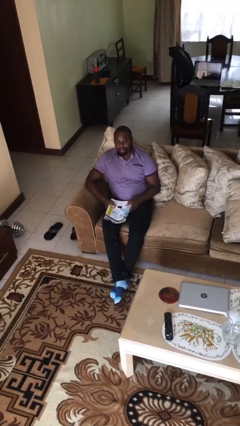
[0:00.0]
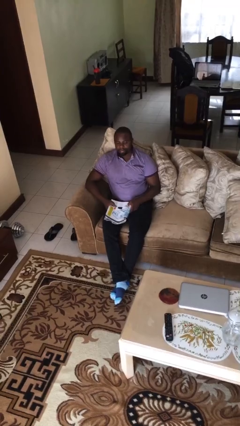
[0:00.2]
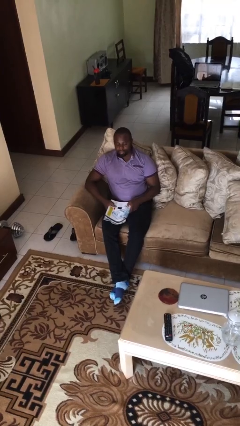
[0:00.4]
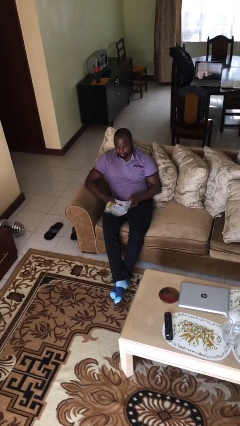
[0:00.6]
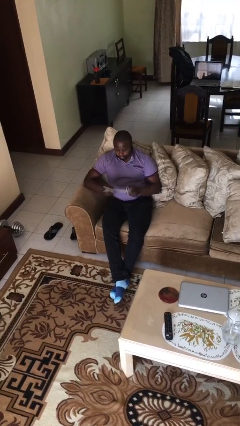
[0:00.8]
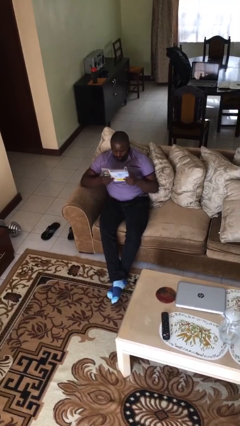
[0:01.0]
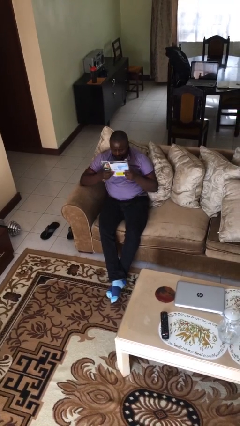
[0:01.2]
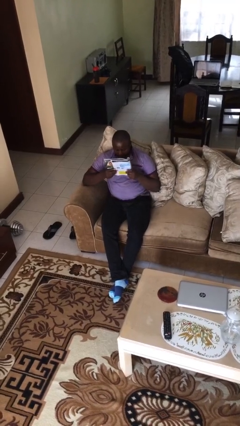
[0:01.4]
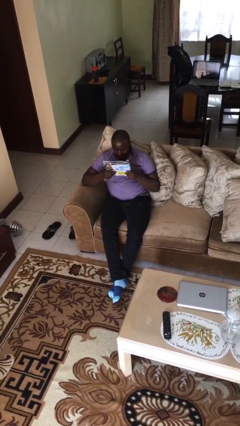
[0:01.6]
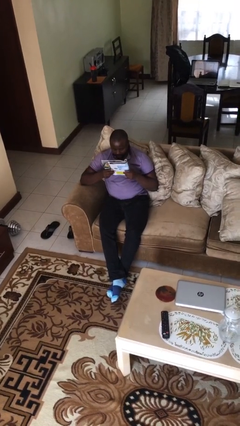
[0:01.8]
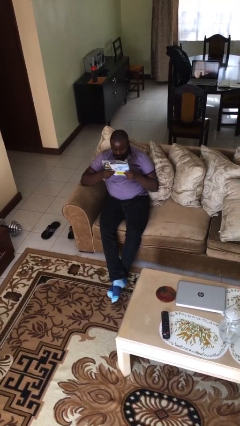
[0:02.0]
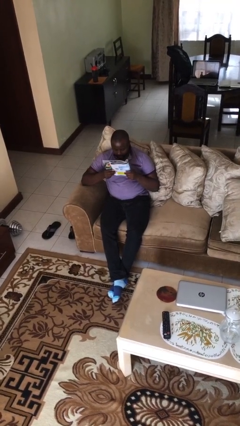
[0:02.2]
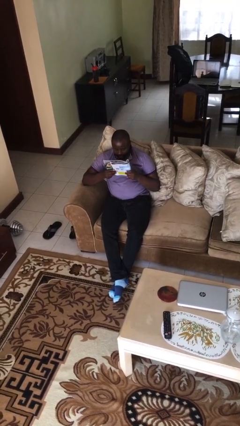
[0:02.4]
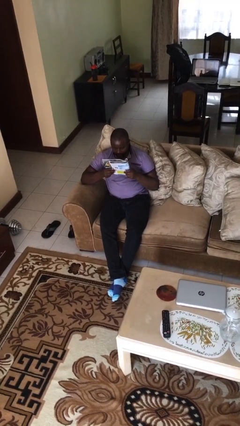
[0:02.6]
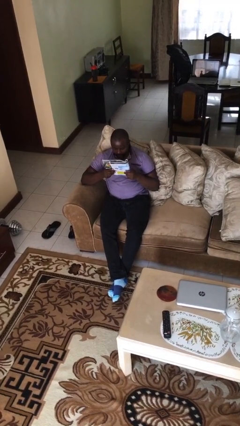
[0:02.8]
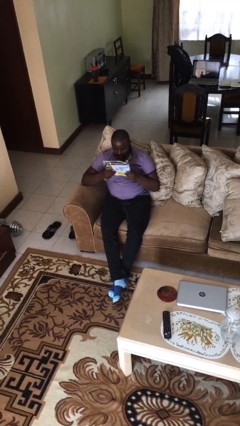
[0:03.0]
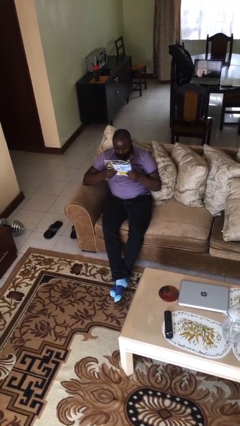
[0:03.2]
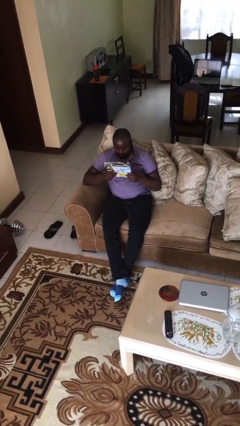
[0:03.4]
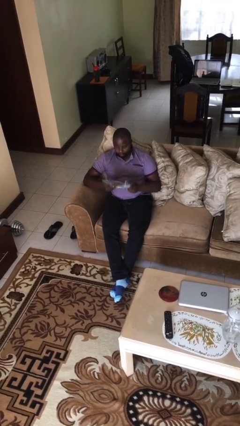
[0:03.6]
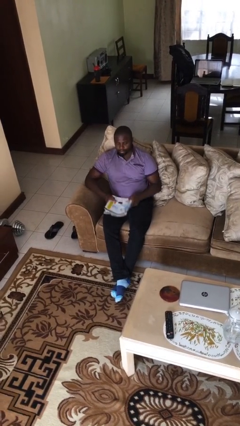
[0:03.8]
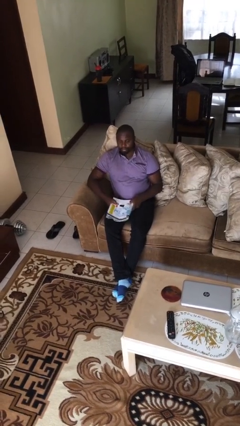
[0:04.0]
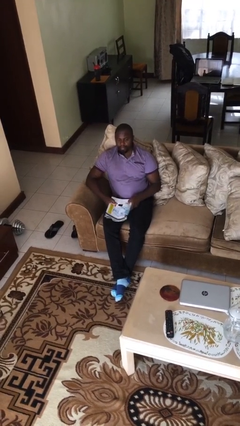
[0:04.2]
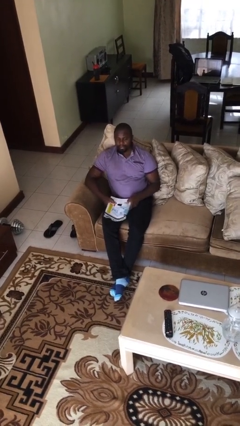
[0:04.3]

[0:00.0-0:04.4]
person reads document

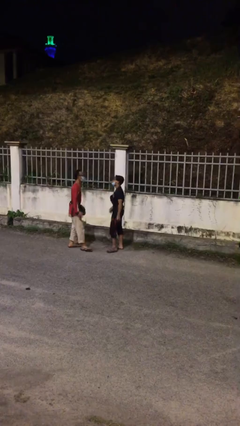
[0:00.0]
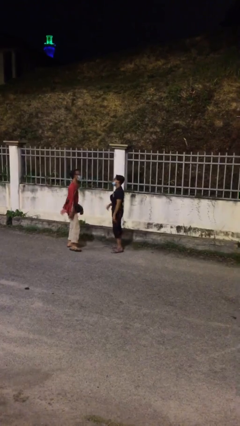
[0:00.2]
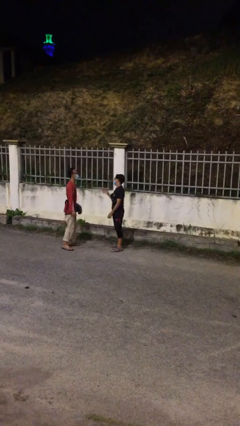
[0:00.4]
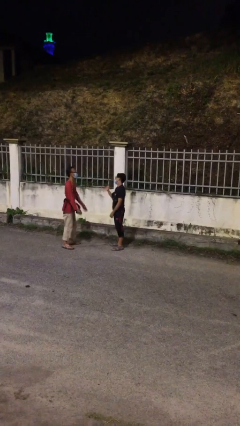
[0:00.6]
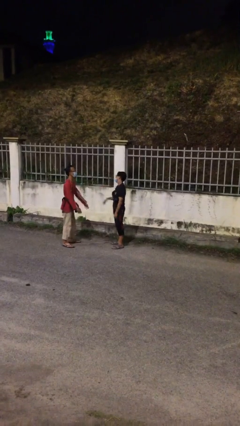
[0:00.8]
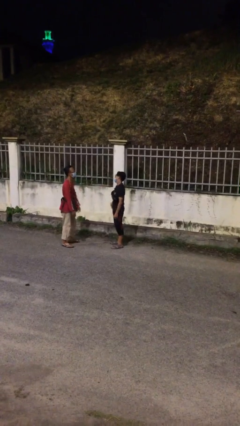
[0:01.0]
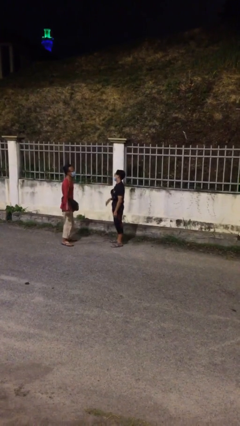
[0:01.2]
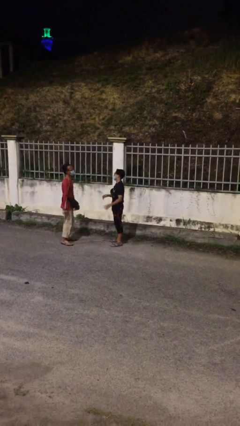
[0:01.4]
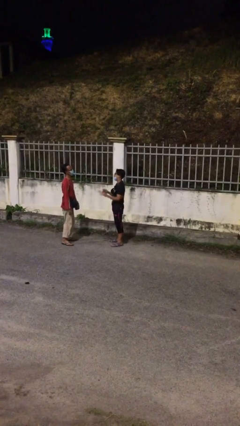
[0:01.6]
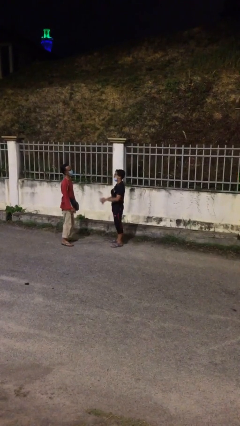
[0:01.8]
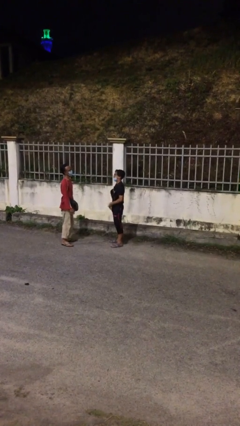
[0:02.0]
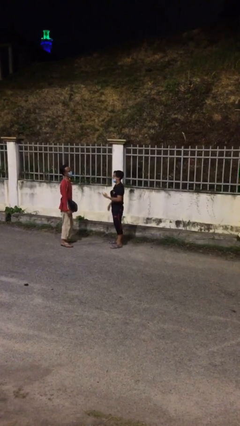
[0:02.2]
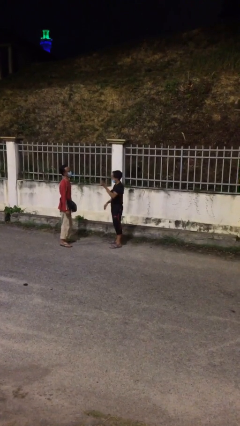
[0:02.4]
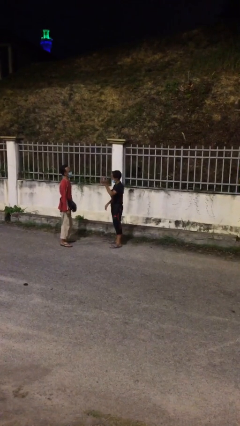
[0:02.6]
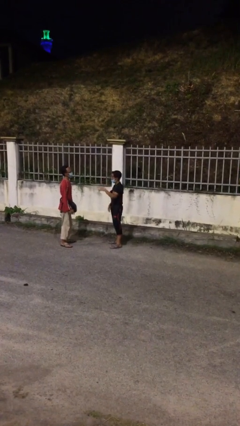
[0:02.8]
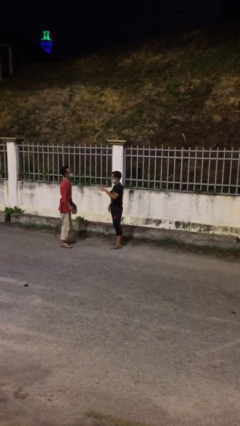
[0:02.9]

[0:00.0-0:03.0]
person talks to person

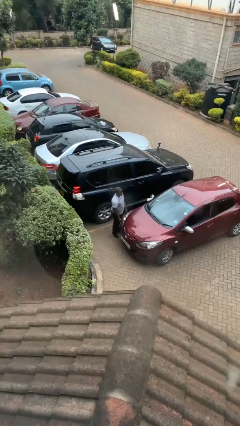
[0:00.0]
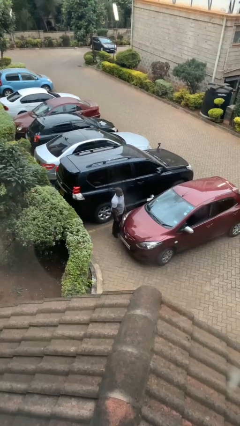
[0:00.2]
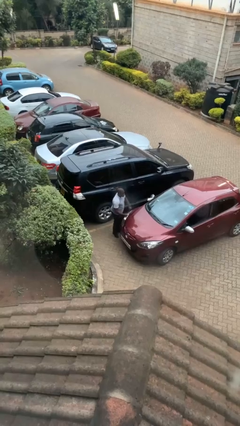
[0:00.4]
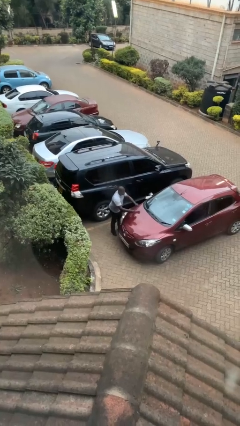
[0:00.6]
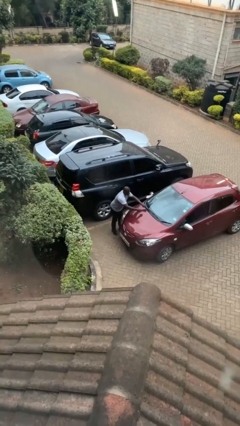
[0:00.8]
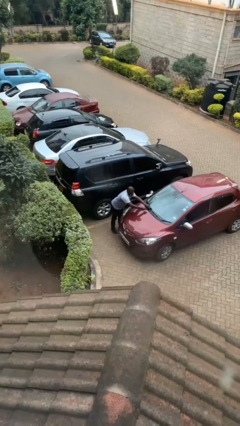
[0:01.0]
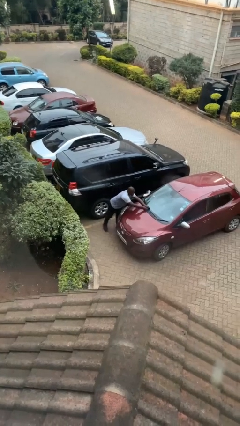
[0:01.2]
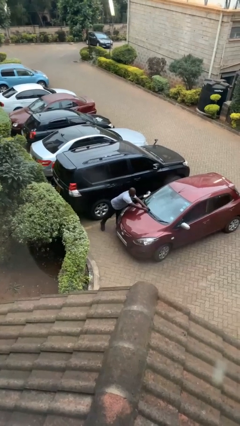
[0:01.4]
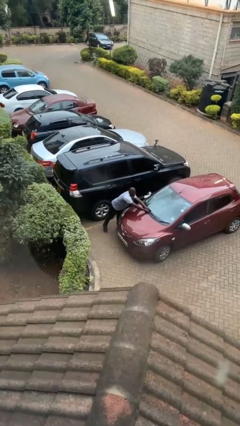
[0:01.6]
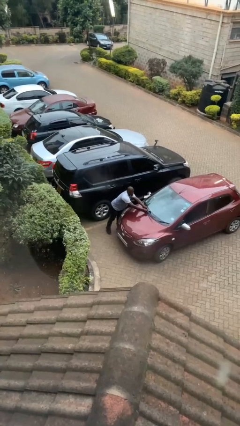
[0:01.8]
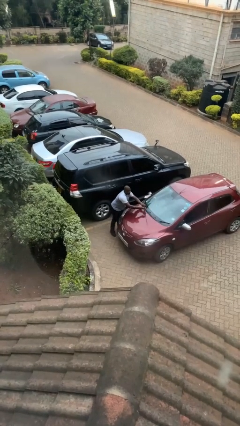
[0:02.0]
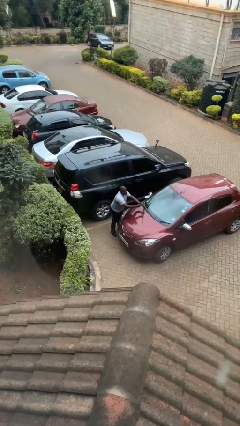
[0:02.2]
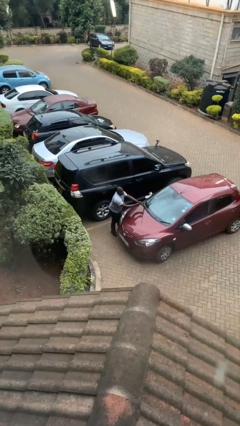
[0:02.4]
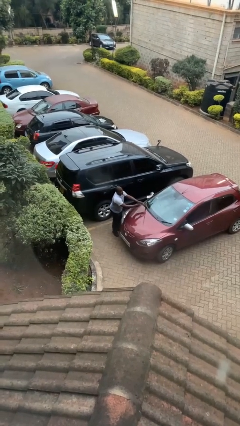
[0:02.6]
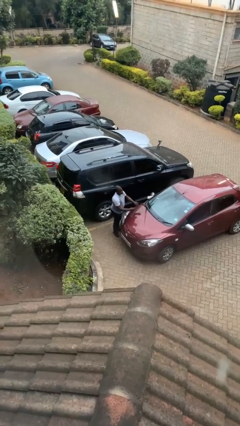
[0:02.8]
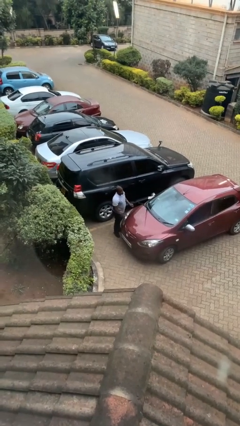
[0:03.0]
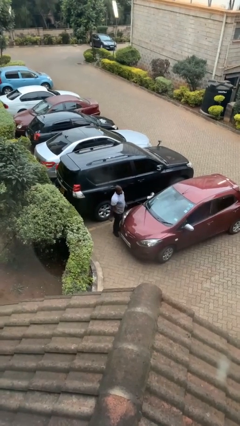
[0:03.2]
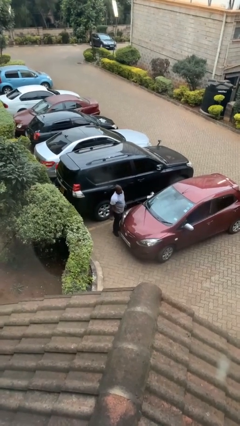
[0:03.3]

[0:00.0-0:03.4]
person flips up car wipers

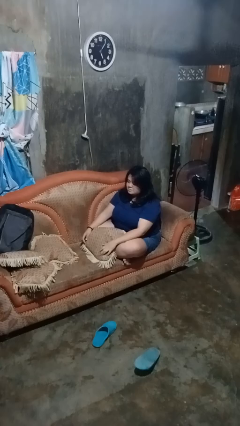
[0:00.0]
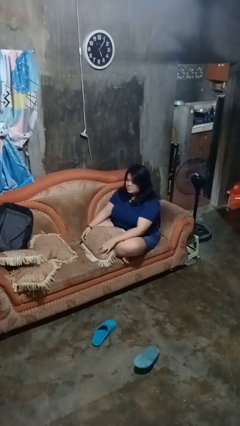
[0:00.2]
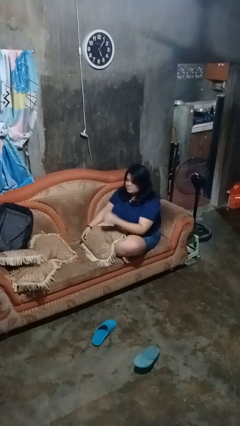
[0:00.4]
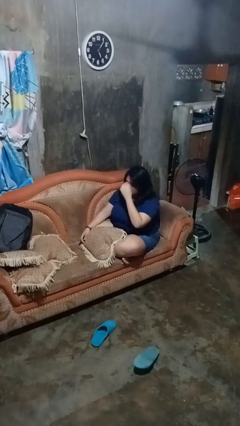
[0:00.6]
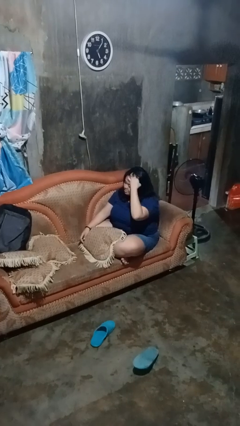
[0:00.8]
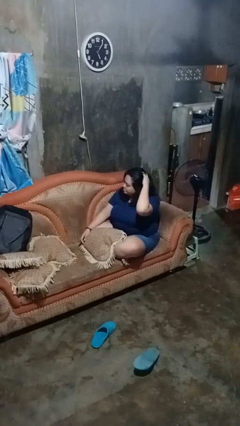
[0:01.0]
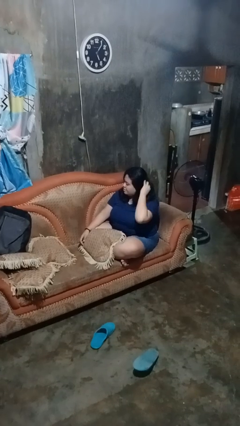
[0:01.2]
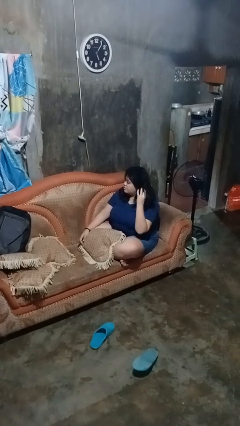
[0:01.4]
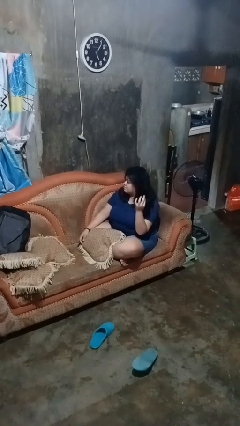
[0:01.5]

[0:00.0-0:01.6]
person strokes hair

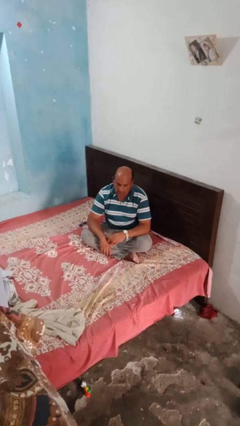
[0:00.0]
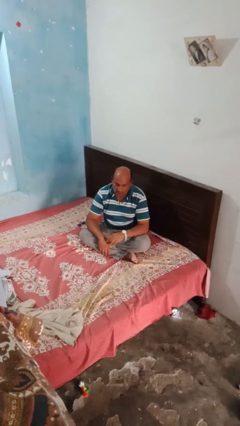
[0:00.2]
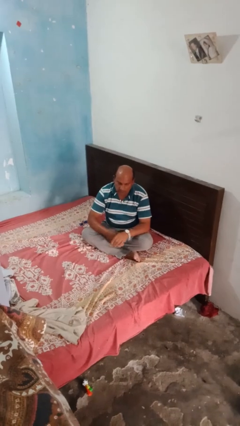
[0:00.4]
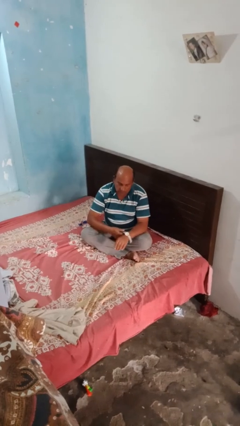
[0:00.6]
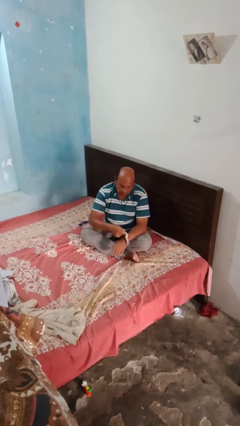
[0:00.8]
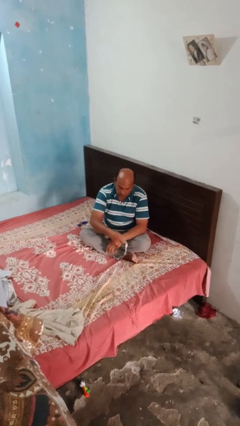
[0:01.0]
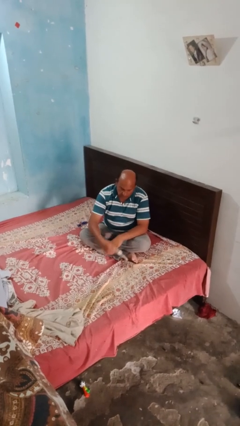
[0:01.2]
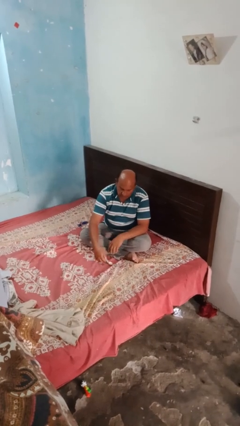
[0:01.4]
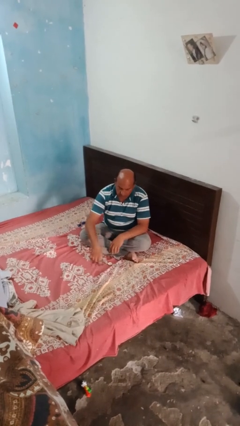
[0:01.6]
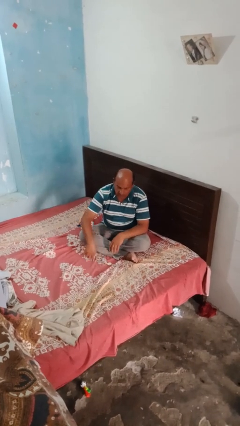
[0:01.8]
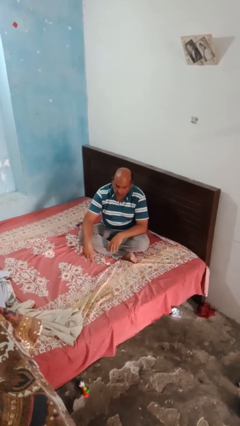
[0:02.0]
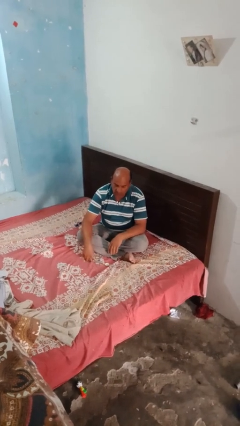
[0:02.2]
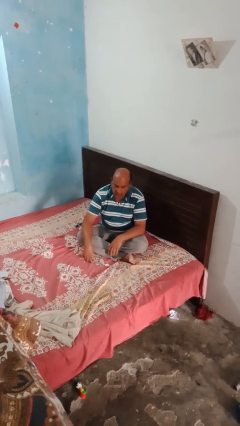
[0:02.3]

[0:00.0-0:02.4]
person takes off wristwatch

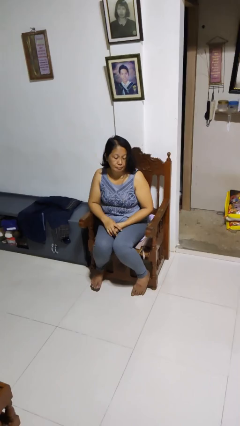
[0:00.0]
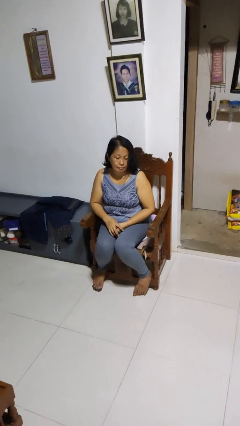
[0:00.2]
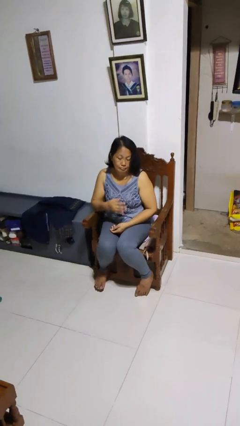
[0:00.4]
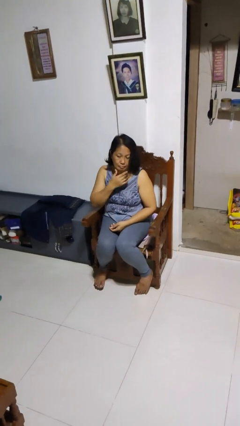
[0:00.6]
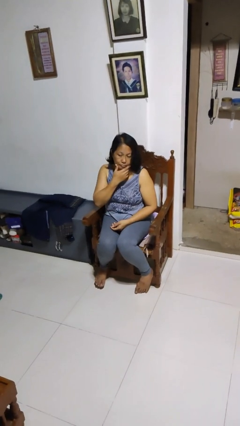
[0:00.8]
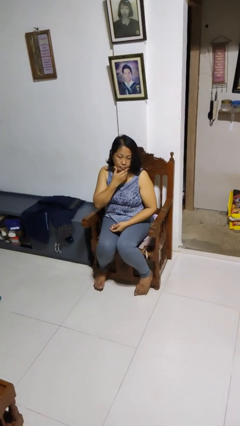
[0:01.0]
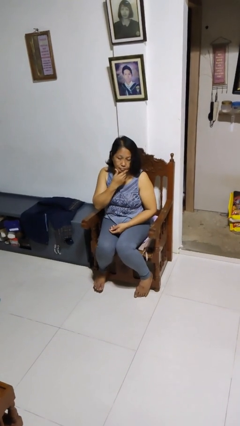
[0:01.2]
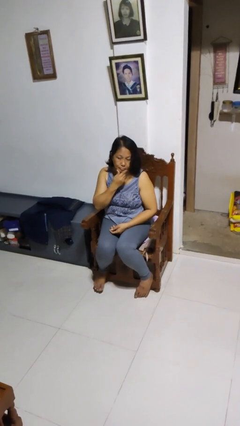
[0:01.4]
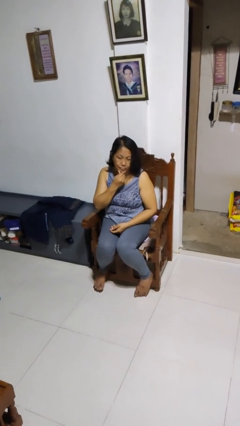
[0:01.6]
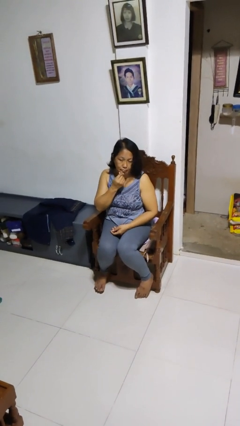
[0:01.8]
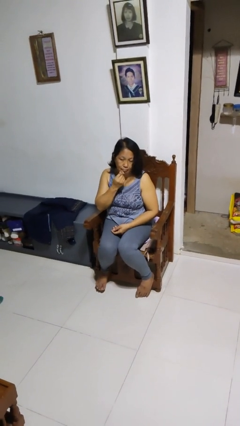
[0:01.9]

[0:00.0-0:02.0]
person strokes chin

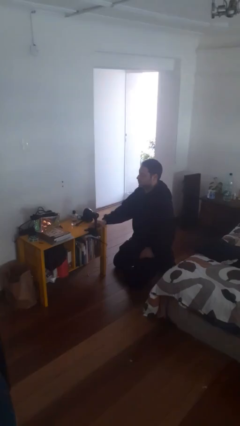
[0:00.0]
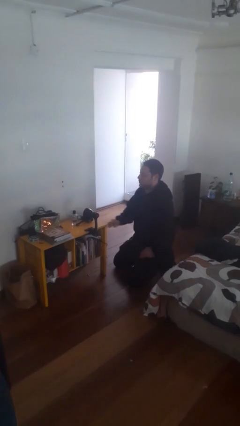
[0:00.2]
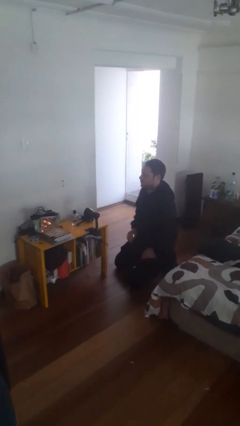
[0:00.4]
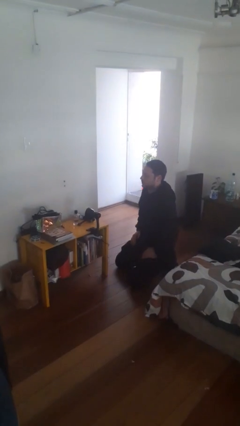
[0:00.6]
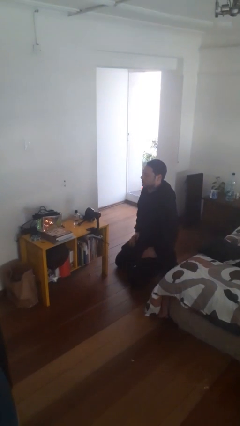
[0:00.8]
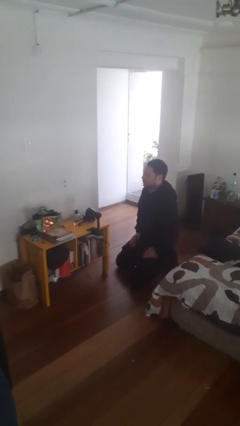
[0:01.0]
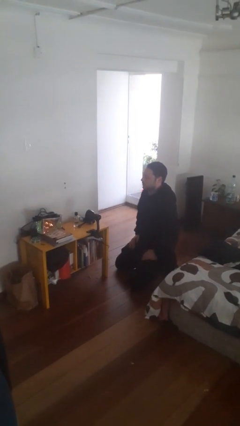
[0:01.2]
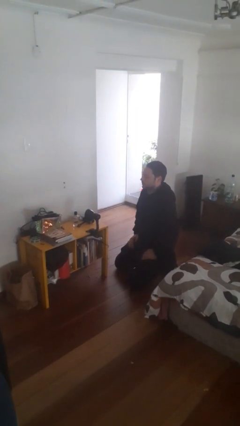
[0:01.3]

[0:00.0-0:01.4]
person turns off lamp
